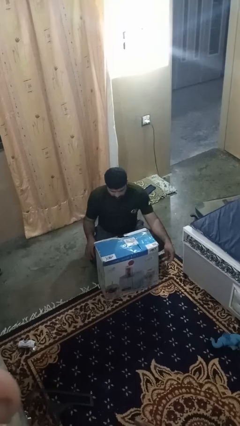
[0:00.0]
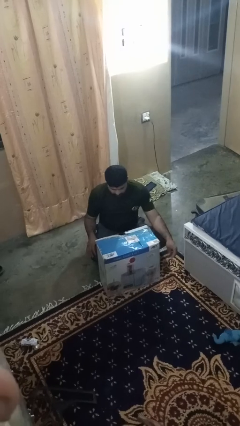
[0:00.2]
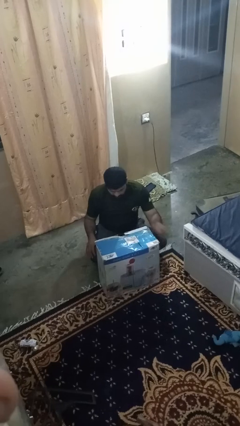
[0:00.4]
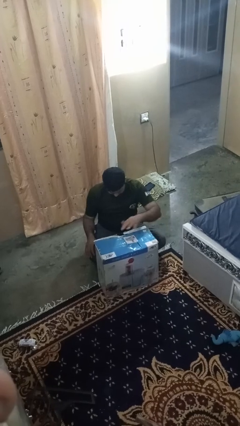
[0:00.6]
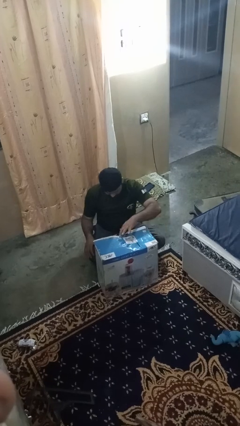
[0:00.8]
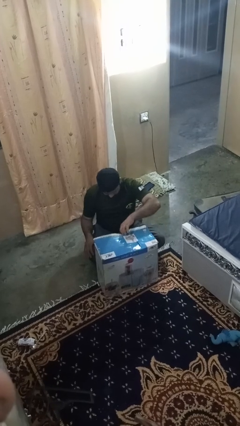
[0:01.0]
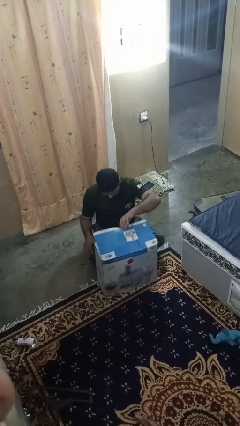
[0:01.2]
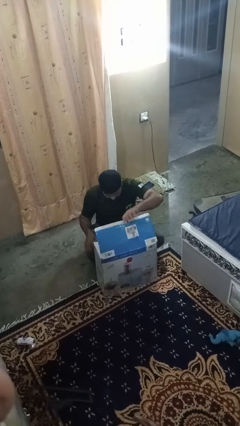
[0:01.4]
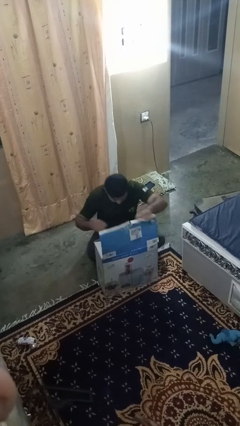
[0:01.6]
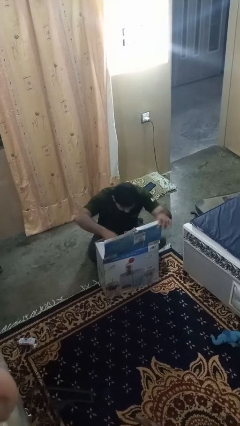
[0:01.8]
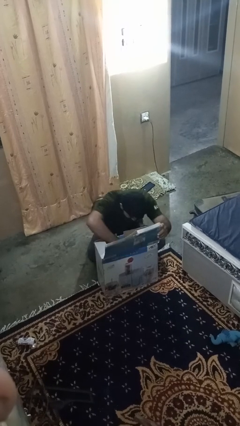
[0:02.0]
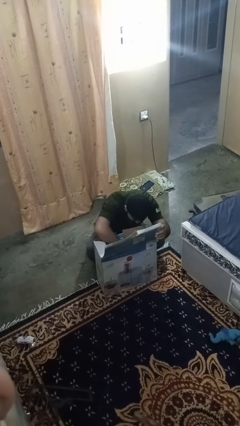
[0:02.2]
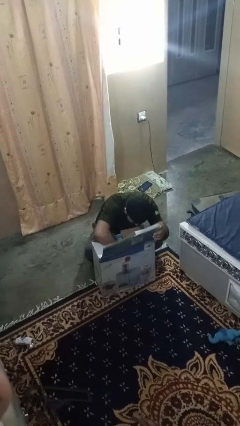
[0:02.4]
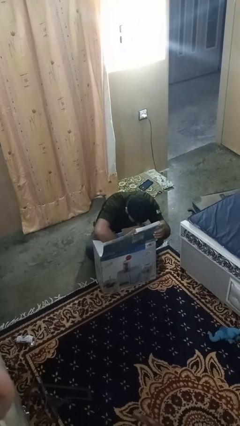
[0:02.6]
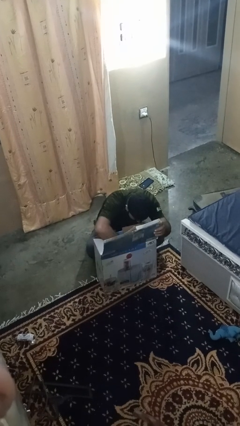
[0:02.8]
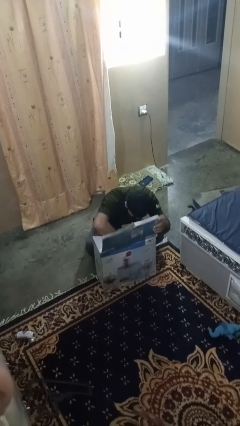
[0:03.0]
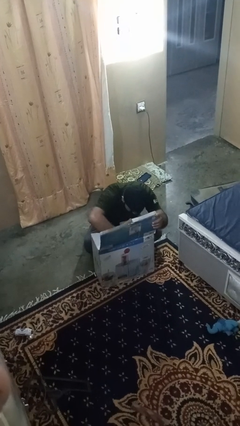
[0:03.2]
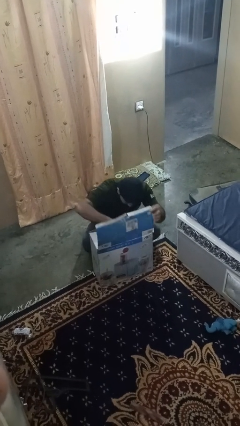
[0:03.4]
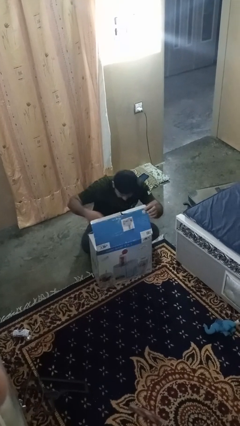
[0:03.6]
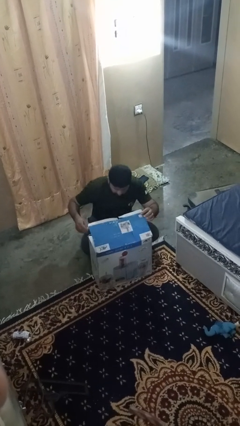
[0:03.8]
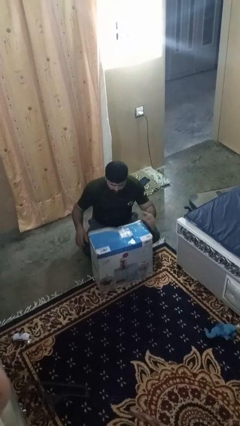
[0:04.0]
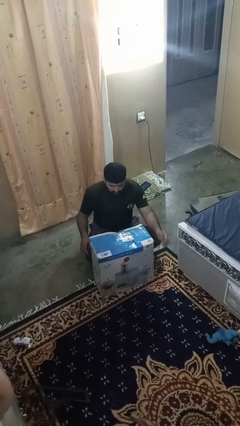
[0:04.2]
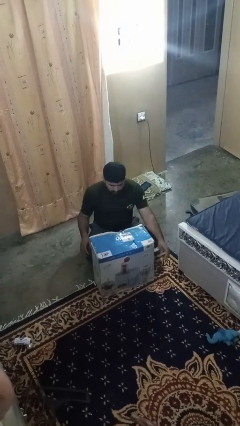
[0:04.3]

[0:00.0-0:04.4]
person searches in box

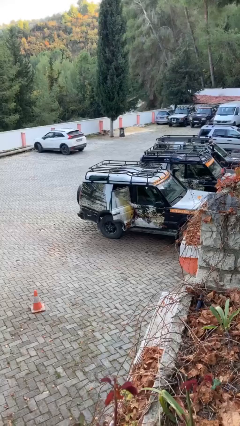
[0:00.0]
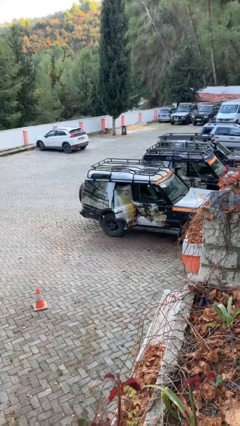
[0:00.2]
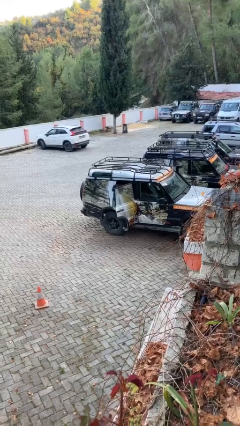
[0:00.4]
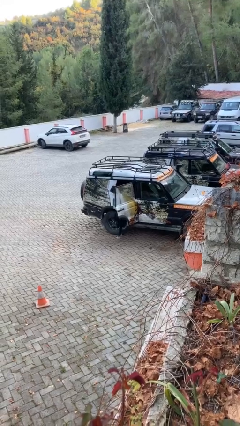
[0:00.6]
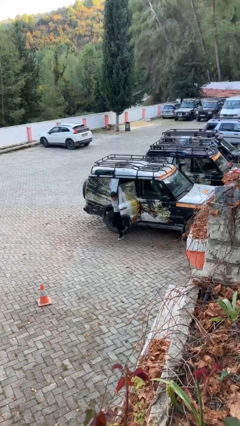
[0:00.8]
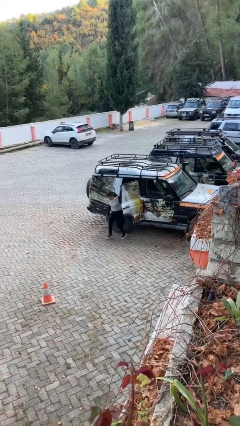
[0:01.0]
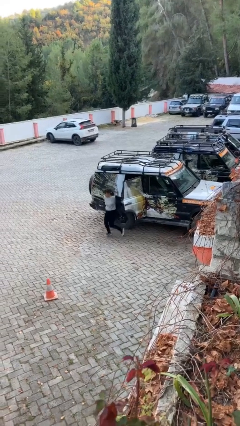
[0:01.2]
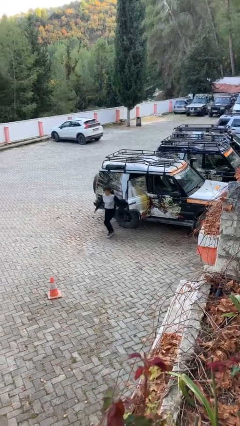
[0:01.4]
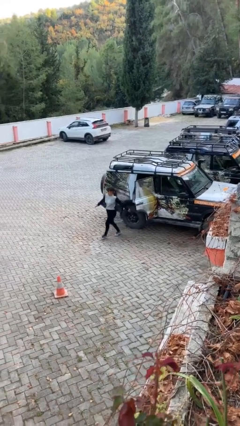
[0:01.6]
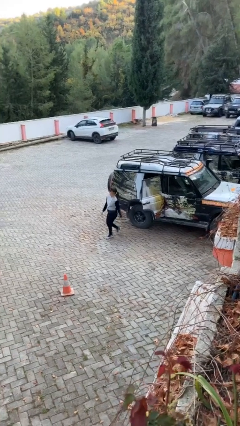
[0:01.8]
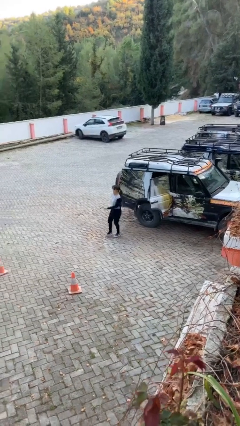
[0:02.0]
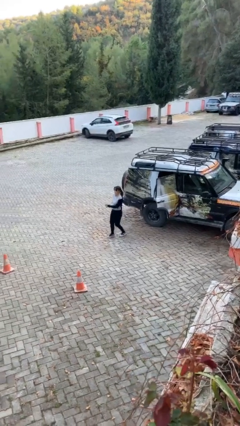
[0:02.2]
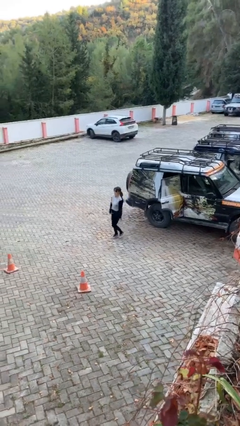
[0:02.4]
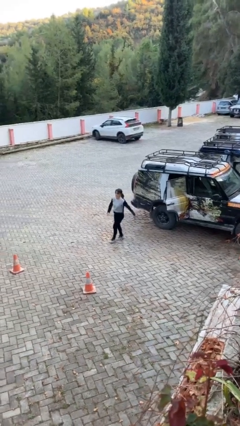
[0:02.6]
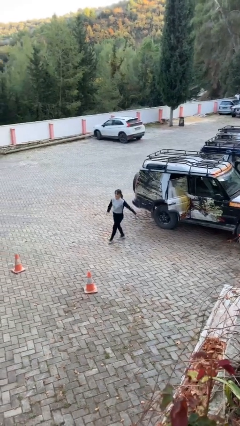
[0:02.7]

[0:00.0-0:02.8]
person exits car

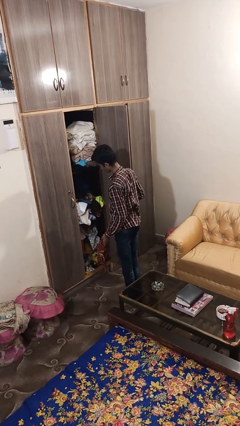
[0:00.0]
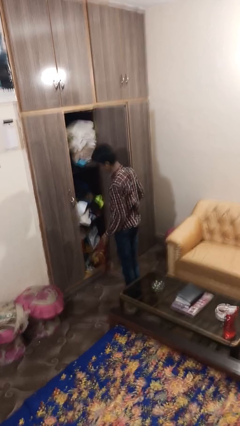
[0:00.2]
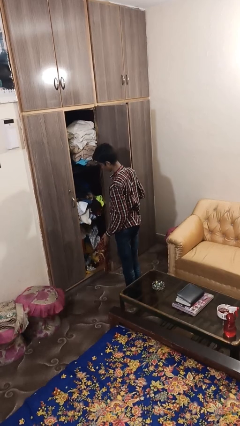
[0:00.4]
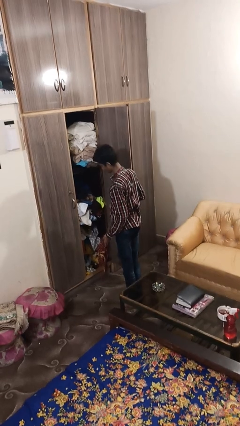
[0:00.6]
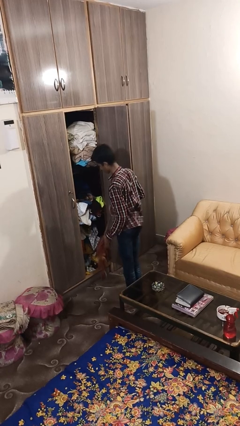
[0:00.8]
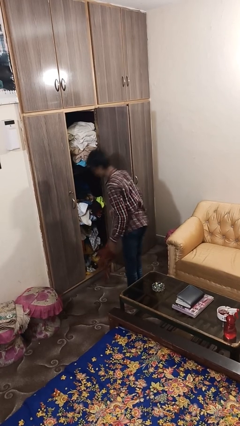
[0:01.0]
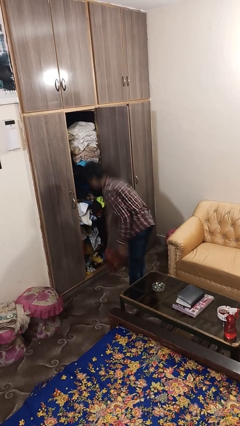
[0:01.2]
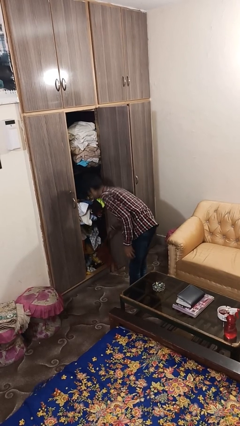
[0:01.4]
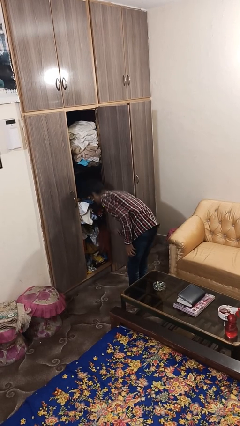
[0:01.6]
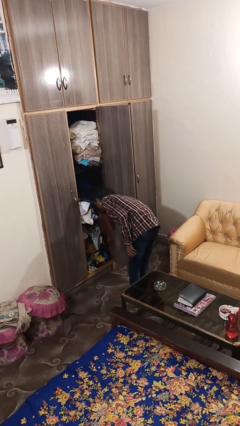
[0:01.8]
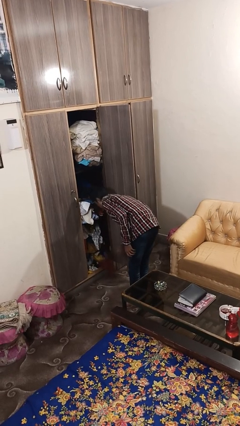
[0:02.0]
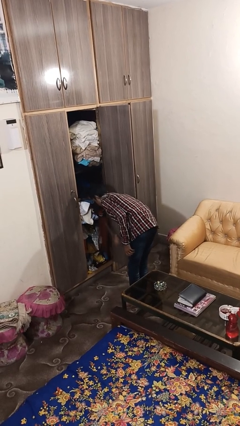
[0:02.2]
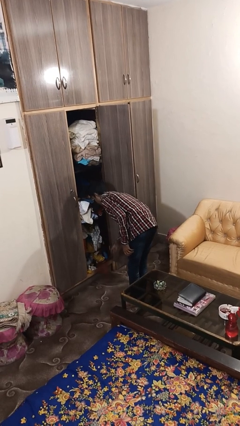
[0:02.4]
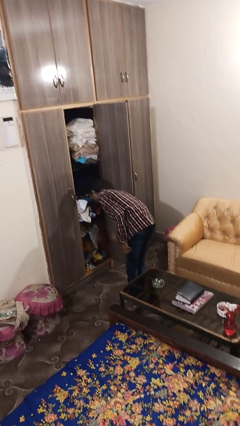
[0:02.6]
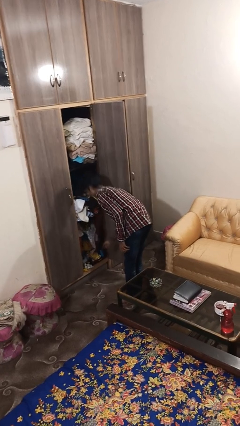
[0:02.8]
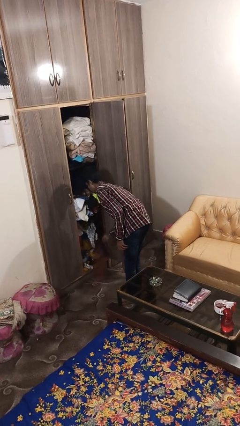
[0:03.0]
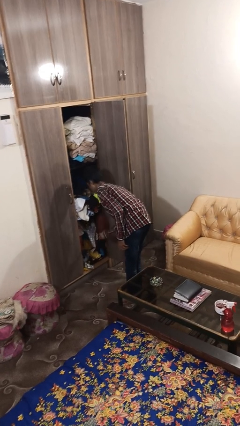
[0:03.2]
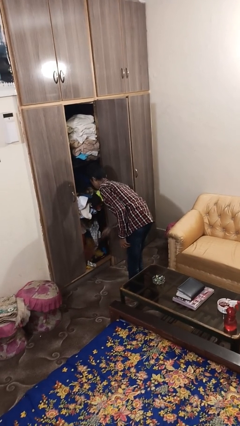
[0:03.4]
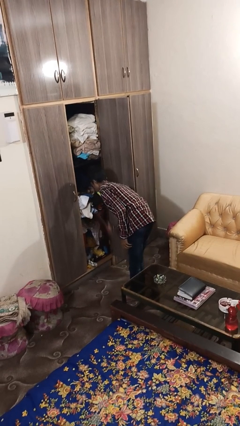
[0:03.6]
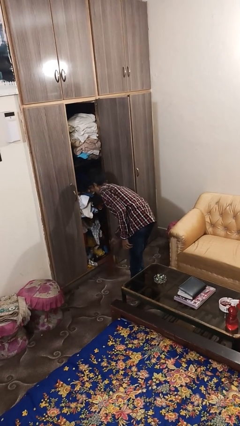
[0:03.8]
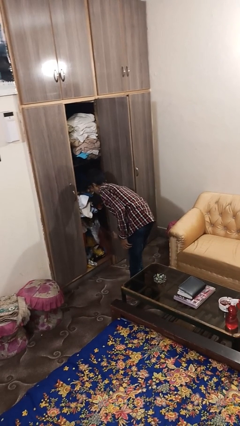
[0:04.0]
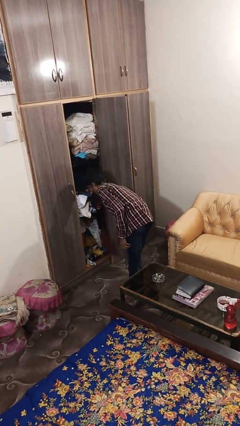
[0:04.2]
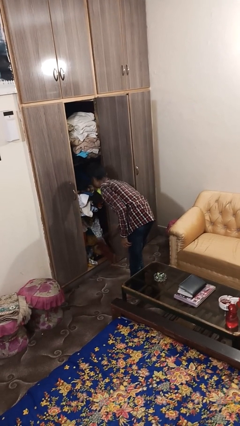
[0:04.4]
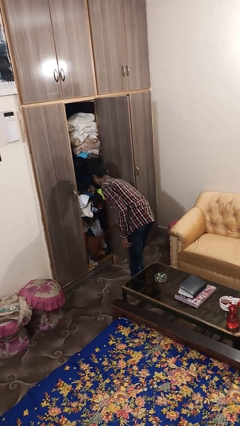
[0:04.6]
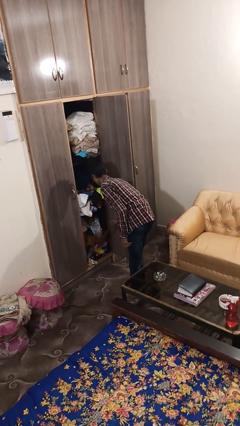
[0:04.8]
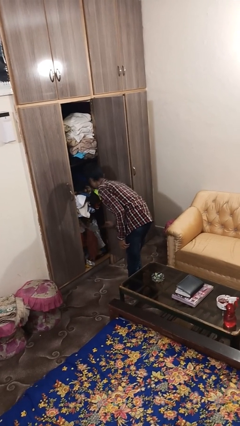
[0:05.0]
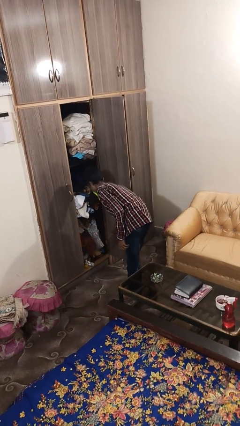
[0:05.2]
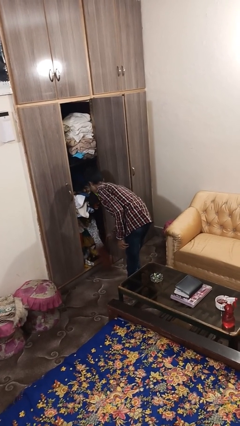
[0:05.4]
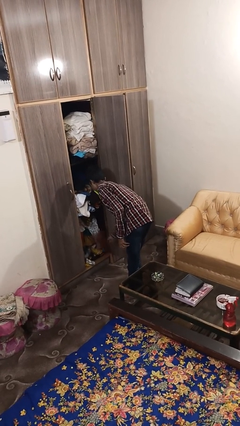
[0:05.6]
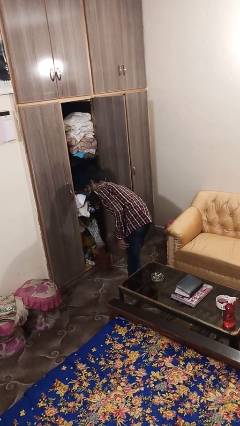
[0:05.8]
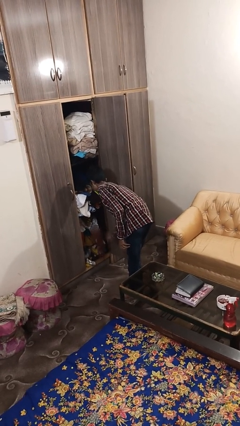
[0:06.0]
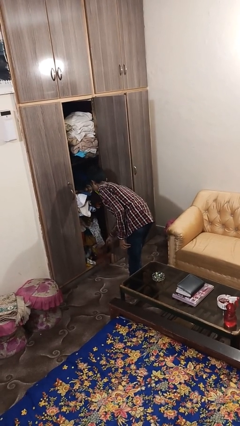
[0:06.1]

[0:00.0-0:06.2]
person dusts furniture

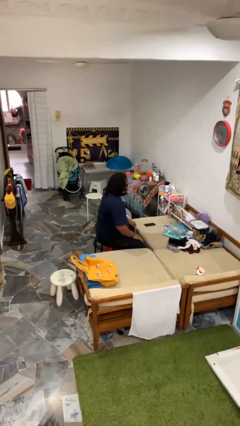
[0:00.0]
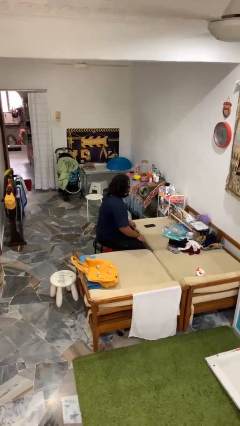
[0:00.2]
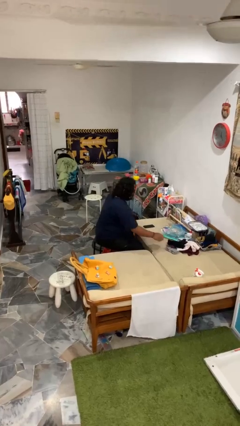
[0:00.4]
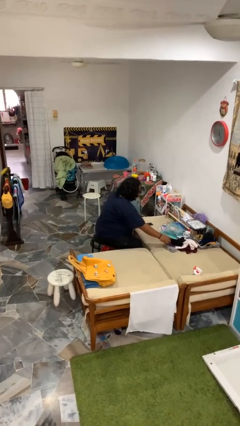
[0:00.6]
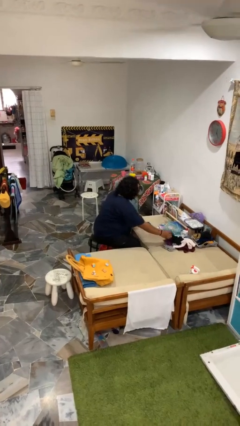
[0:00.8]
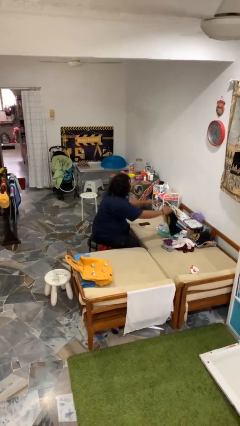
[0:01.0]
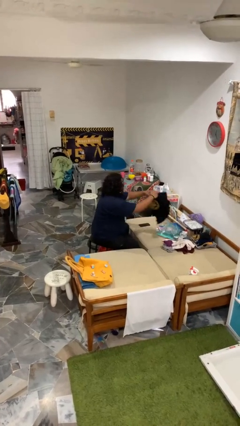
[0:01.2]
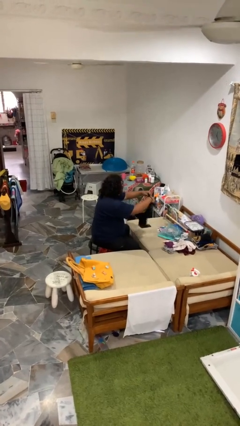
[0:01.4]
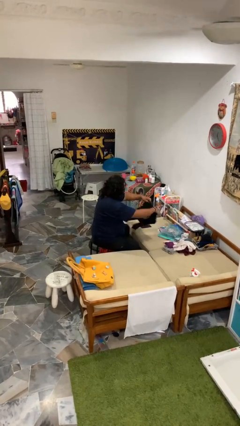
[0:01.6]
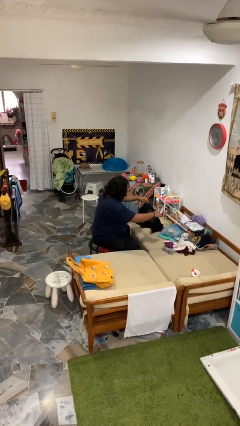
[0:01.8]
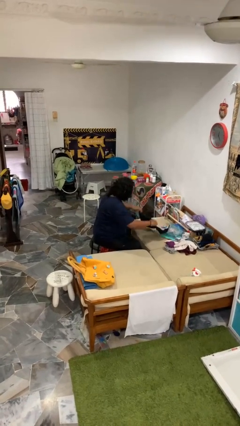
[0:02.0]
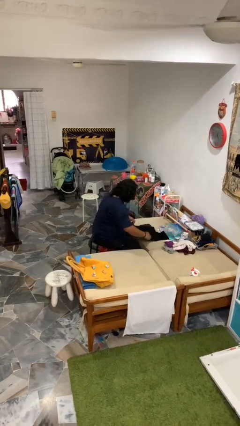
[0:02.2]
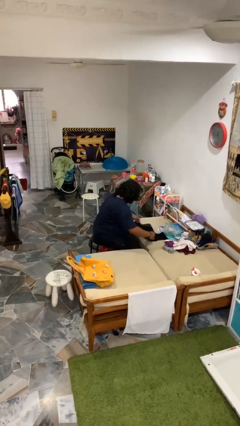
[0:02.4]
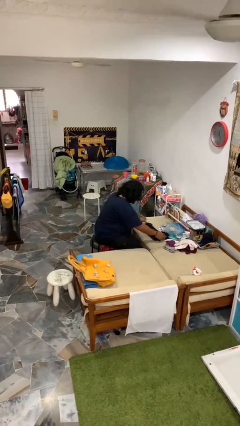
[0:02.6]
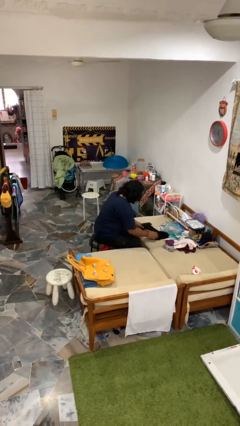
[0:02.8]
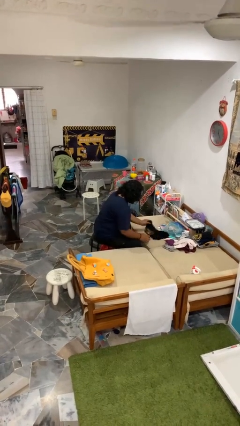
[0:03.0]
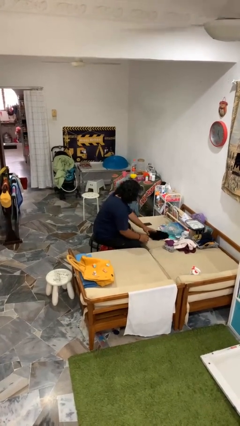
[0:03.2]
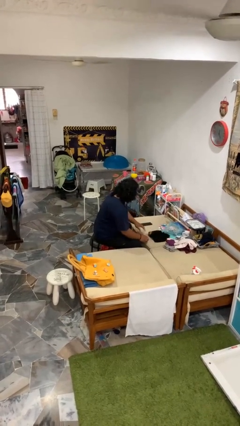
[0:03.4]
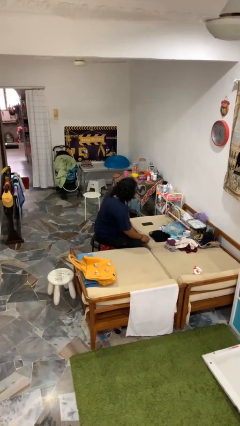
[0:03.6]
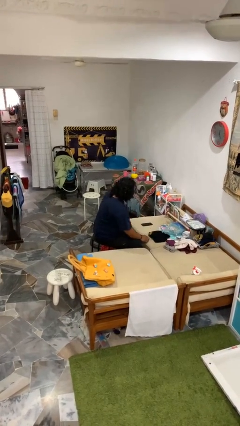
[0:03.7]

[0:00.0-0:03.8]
person folds shirt
